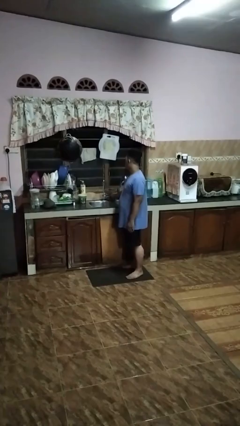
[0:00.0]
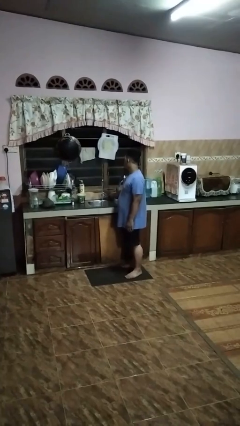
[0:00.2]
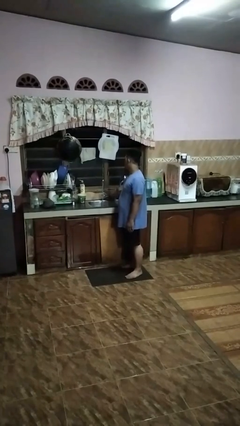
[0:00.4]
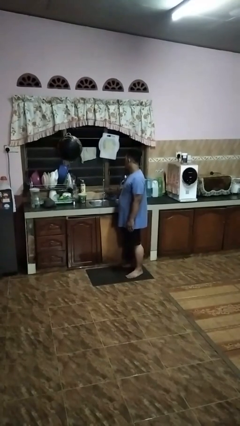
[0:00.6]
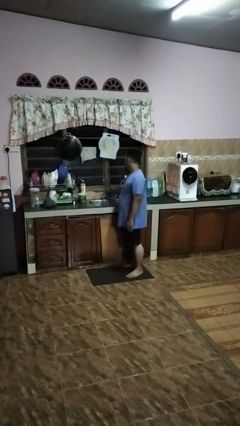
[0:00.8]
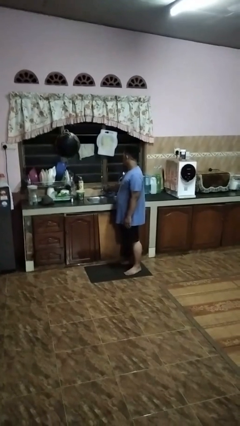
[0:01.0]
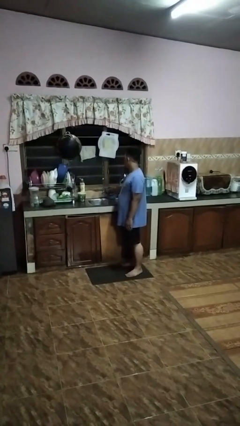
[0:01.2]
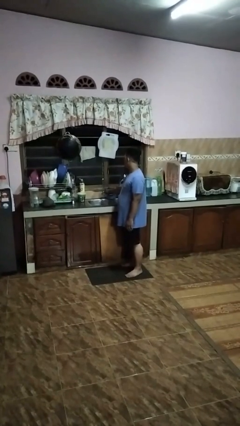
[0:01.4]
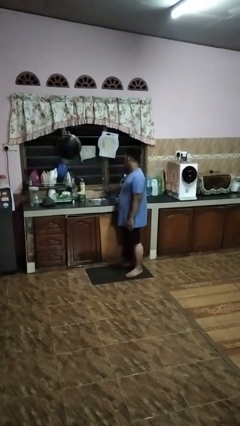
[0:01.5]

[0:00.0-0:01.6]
person turns on faucet

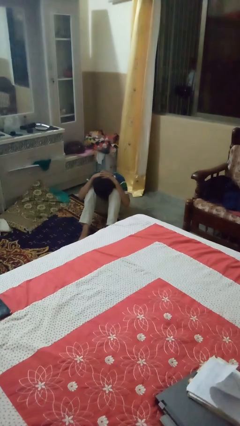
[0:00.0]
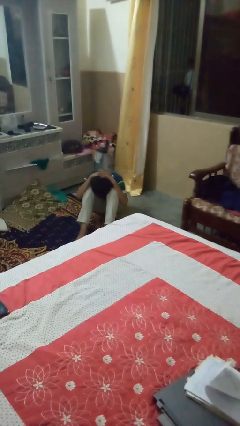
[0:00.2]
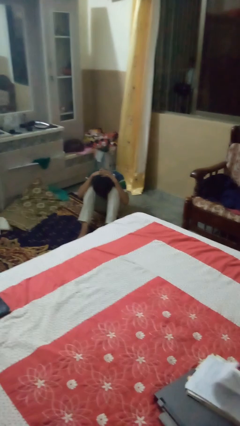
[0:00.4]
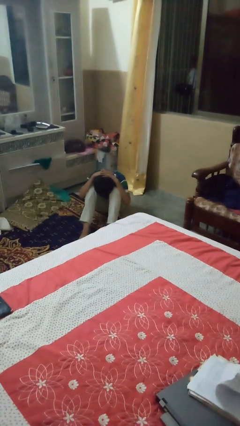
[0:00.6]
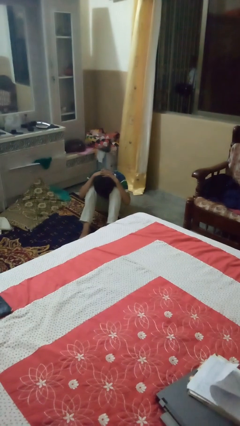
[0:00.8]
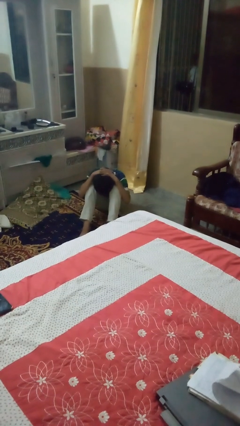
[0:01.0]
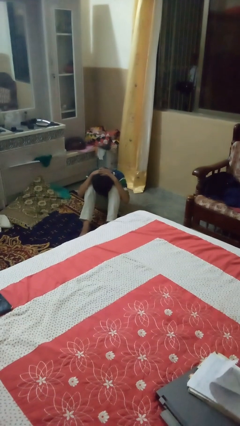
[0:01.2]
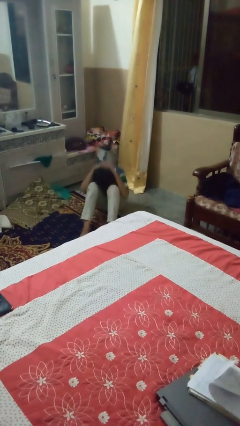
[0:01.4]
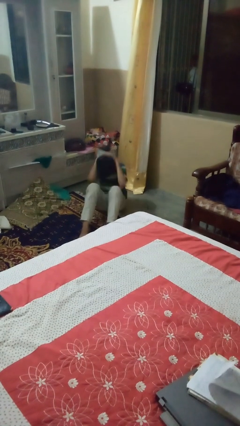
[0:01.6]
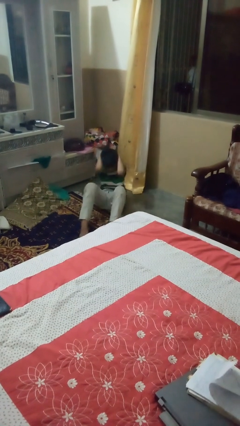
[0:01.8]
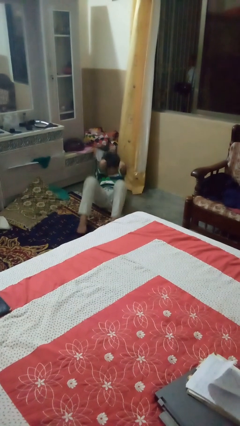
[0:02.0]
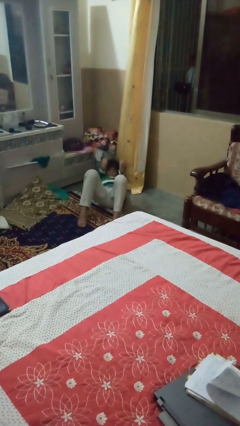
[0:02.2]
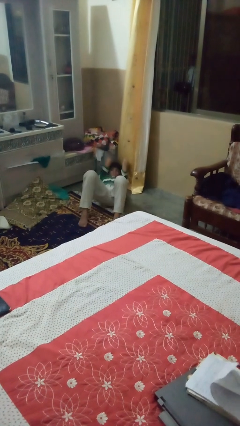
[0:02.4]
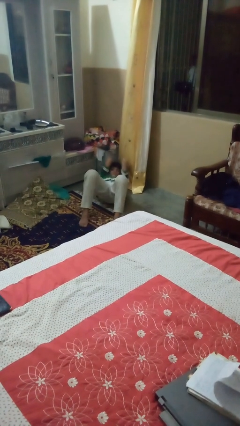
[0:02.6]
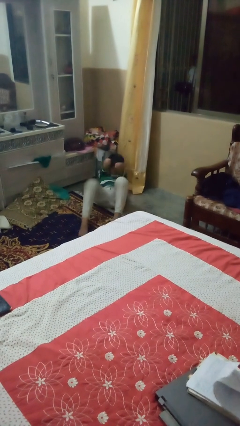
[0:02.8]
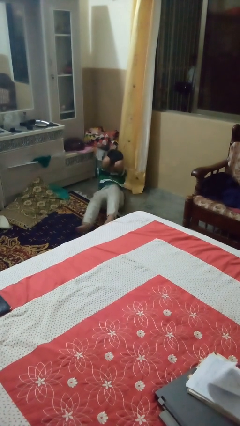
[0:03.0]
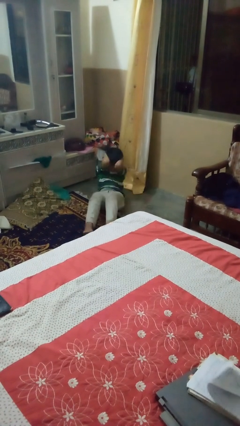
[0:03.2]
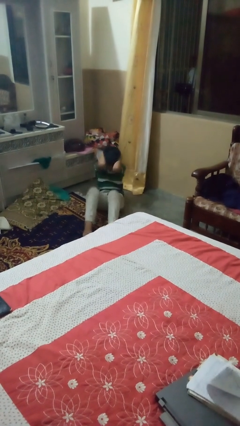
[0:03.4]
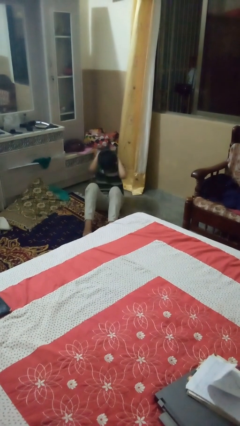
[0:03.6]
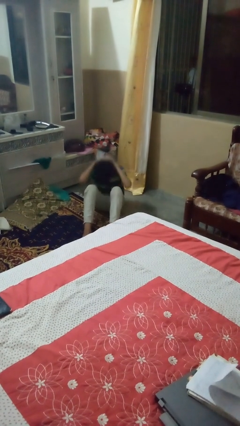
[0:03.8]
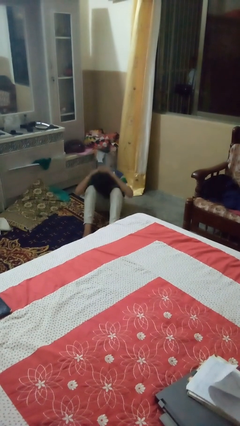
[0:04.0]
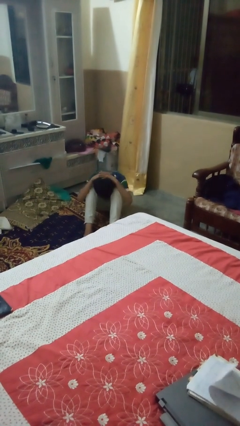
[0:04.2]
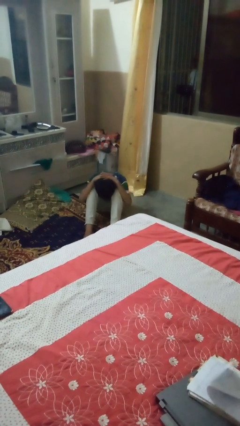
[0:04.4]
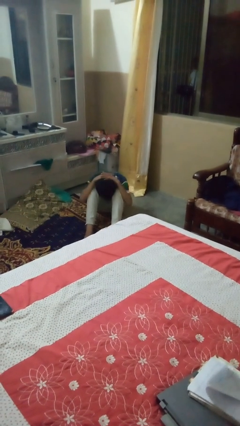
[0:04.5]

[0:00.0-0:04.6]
person exercises with situp

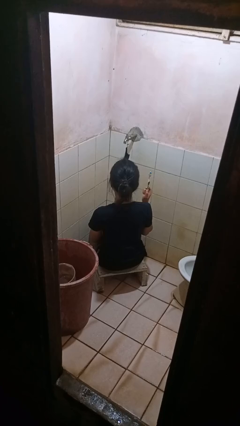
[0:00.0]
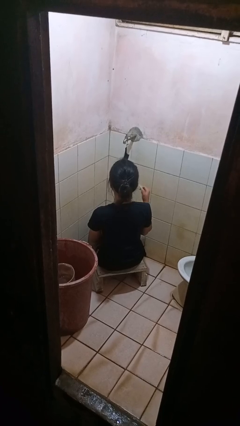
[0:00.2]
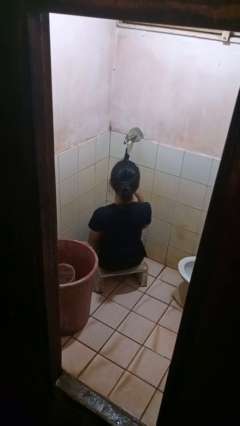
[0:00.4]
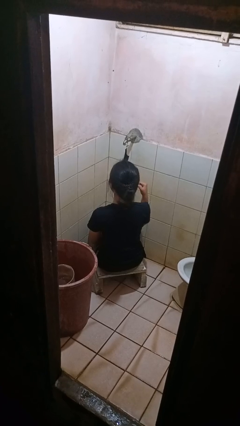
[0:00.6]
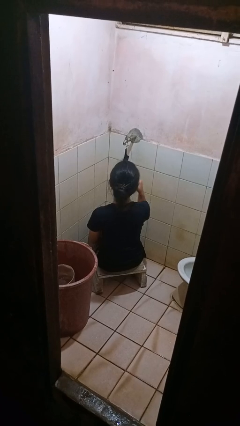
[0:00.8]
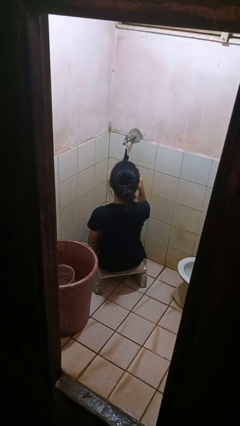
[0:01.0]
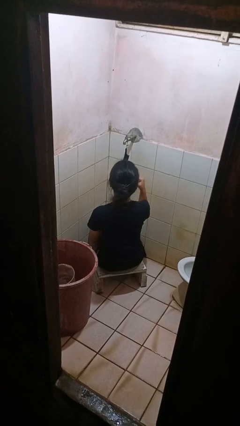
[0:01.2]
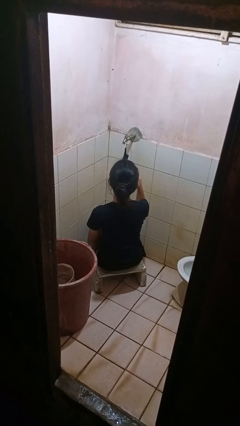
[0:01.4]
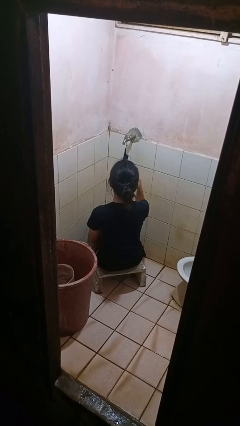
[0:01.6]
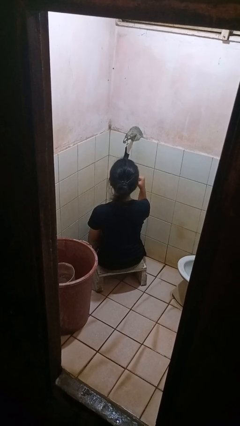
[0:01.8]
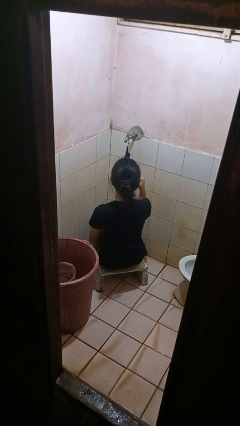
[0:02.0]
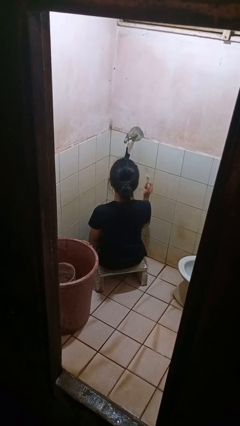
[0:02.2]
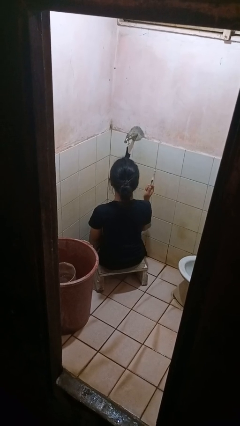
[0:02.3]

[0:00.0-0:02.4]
person brushes teeth

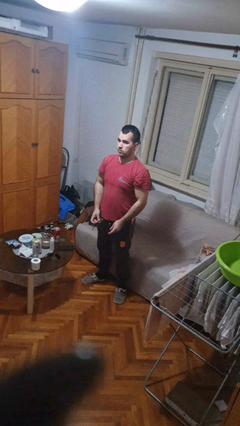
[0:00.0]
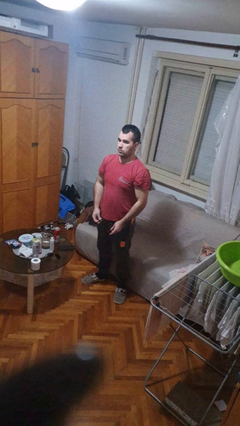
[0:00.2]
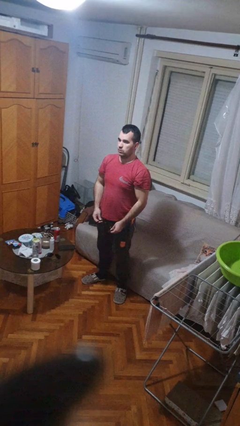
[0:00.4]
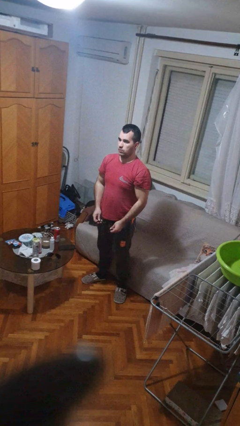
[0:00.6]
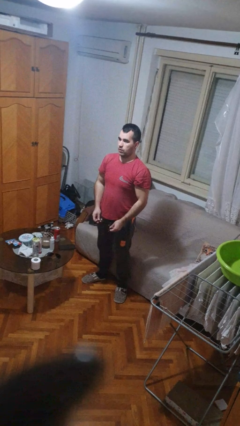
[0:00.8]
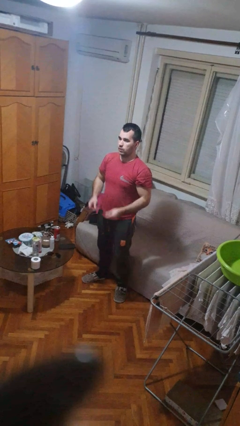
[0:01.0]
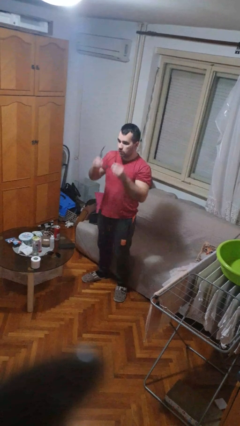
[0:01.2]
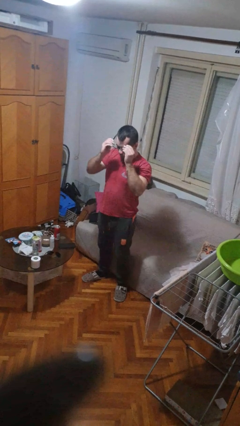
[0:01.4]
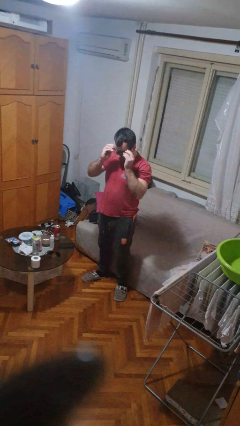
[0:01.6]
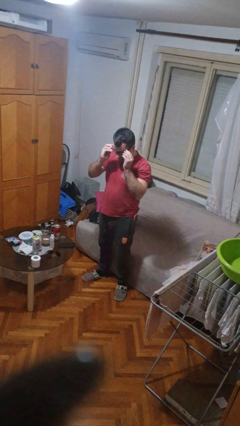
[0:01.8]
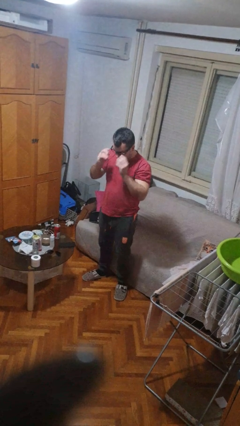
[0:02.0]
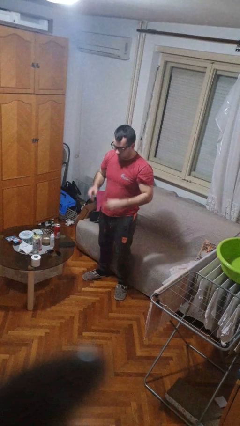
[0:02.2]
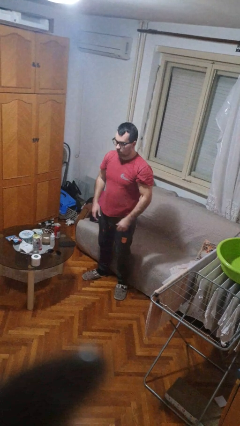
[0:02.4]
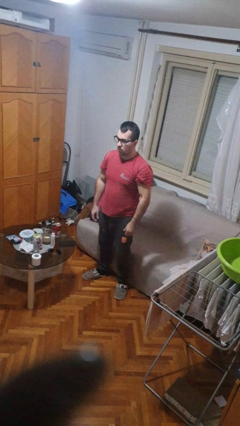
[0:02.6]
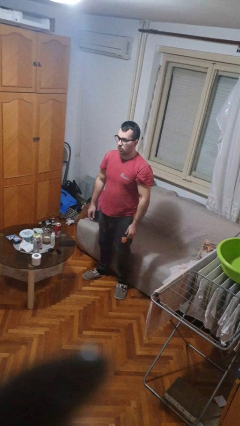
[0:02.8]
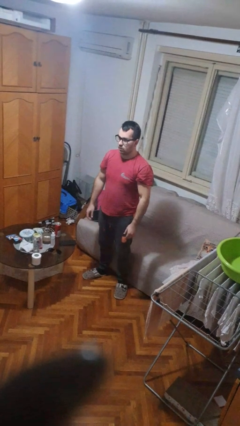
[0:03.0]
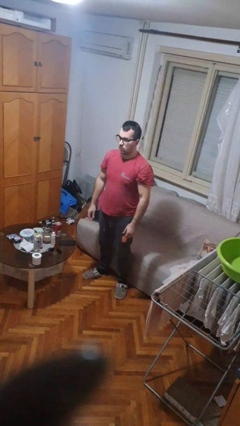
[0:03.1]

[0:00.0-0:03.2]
person puts on glasses

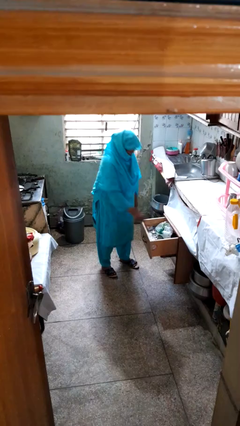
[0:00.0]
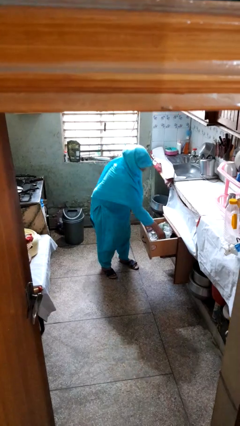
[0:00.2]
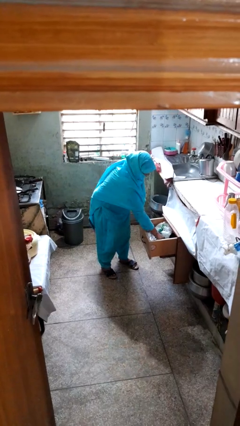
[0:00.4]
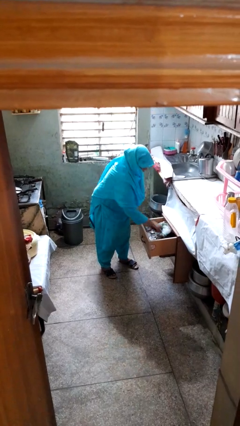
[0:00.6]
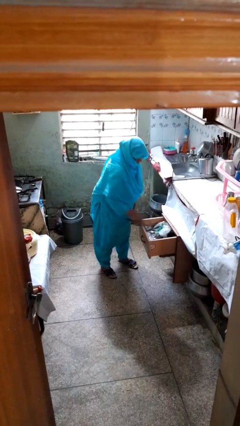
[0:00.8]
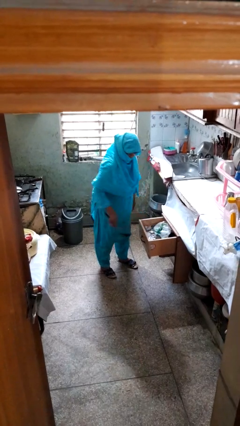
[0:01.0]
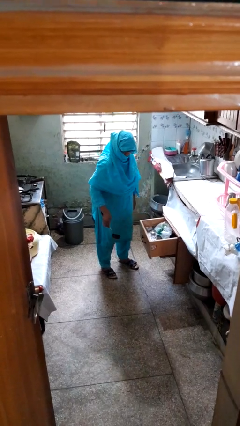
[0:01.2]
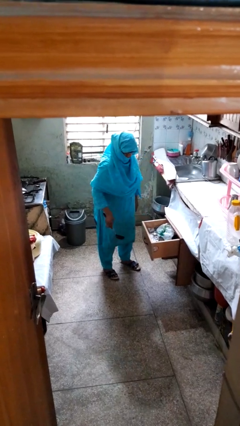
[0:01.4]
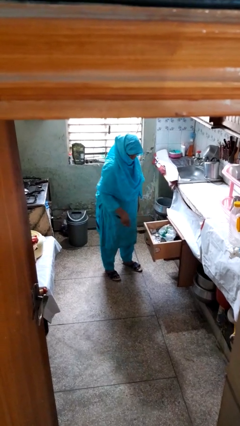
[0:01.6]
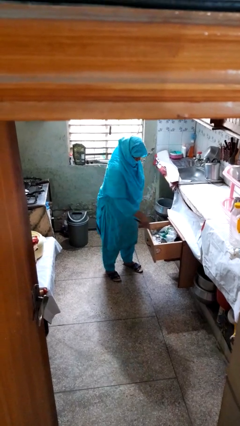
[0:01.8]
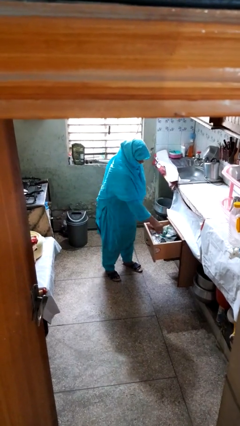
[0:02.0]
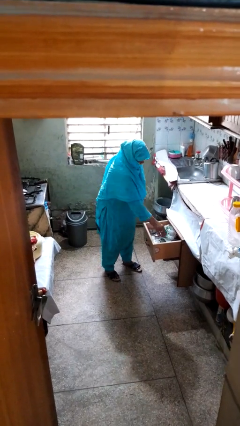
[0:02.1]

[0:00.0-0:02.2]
person takes object from kitchen drawer

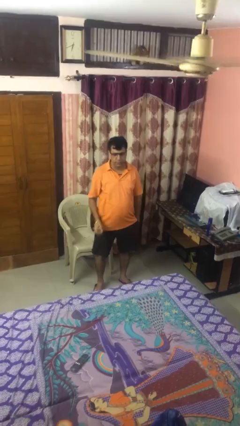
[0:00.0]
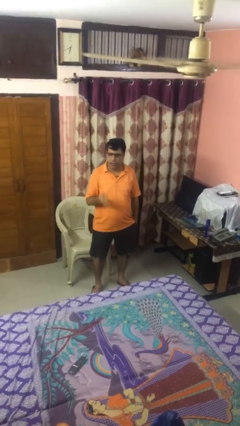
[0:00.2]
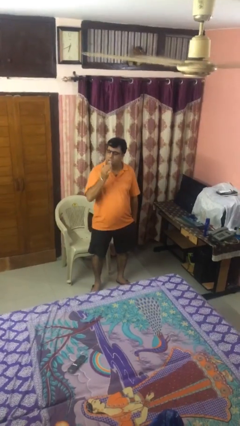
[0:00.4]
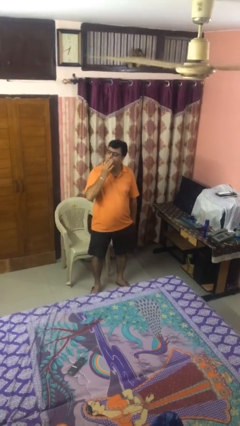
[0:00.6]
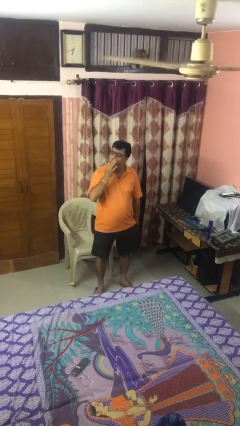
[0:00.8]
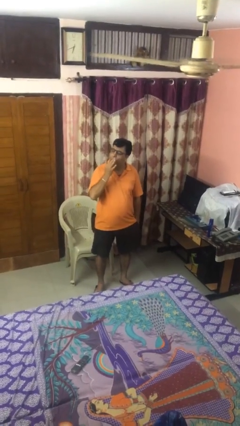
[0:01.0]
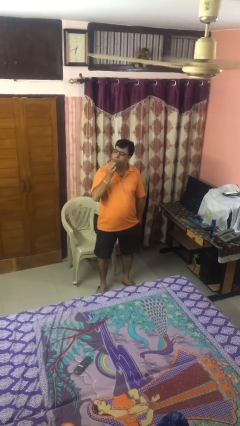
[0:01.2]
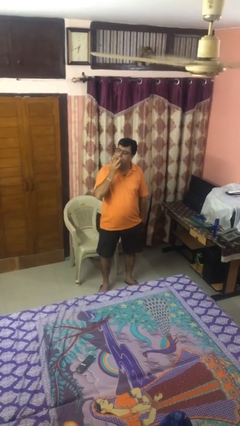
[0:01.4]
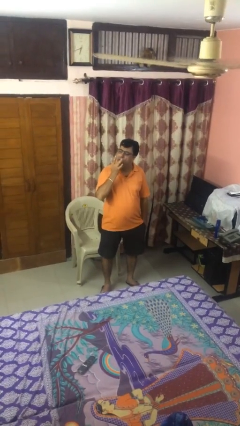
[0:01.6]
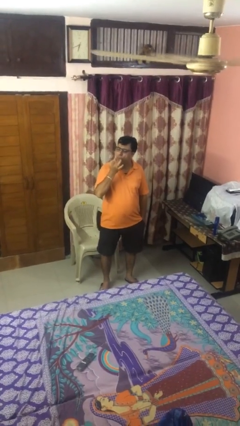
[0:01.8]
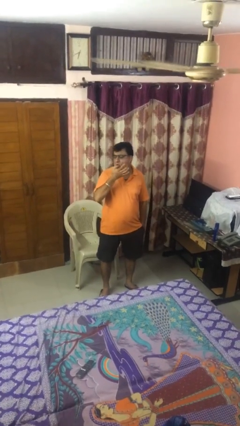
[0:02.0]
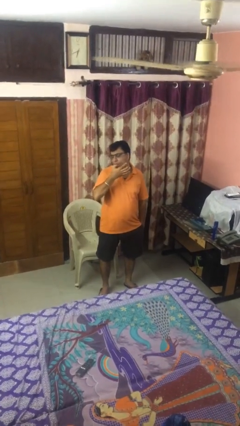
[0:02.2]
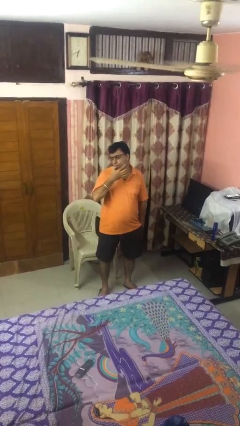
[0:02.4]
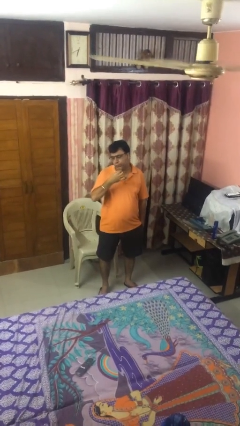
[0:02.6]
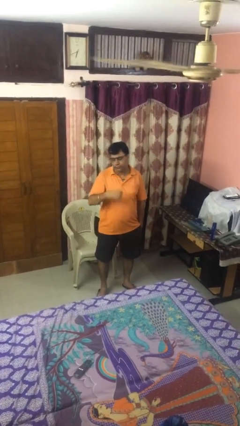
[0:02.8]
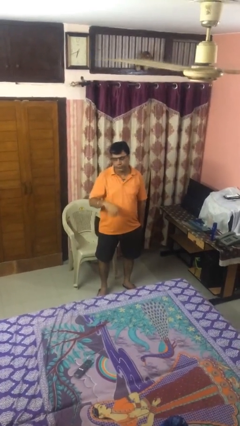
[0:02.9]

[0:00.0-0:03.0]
person licks fingers

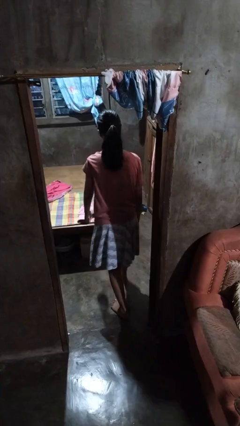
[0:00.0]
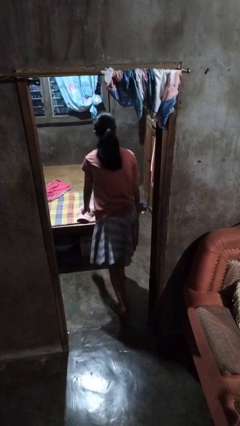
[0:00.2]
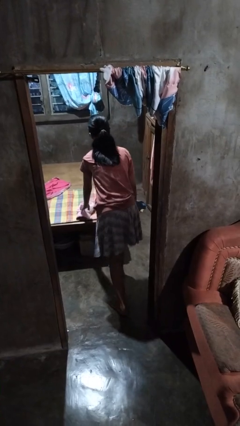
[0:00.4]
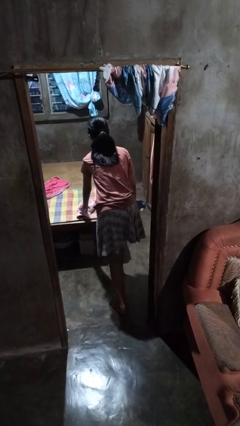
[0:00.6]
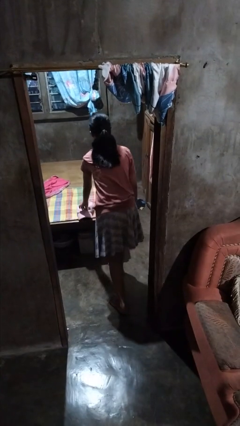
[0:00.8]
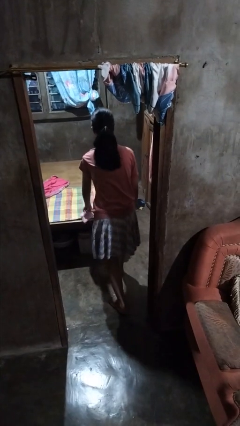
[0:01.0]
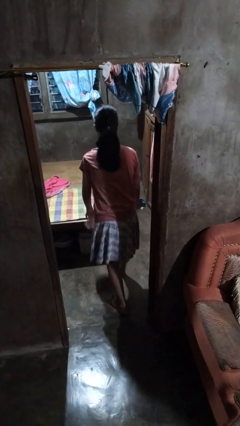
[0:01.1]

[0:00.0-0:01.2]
person picks up object from bed
